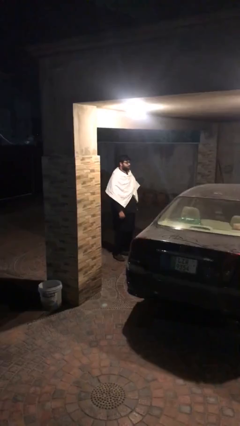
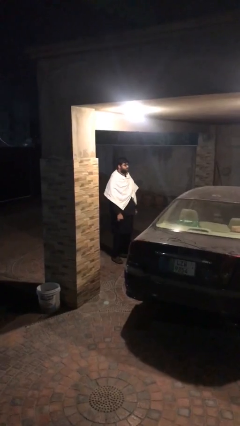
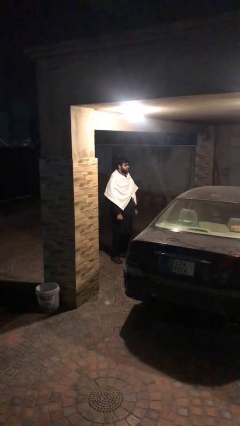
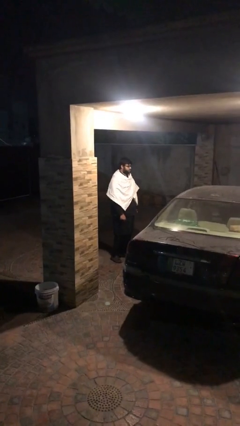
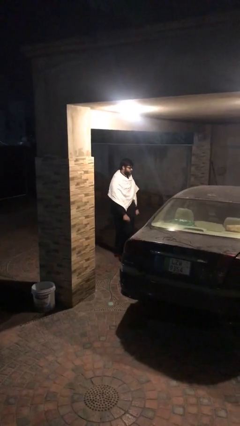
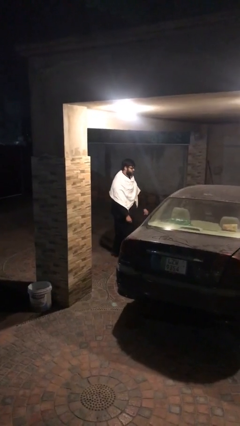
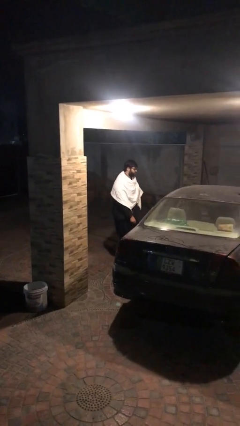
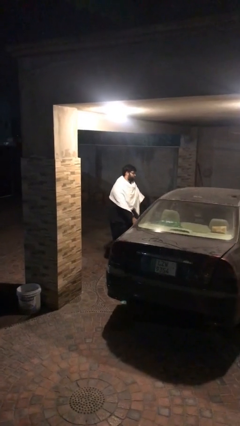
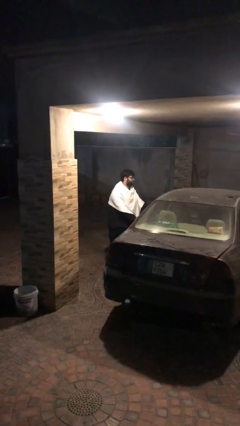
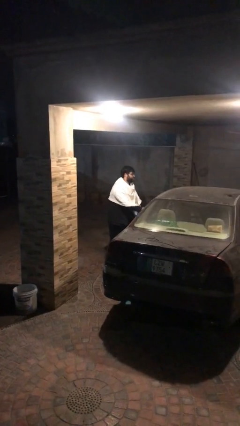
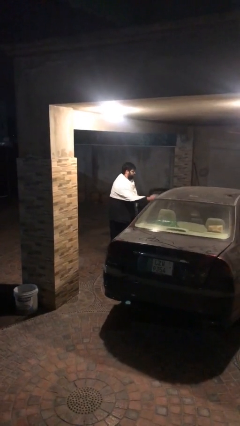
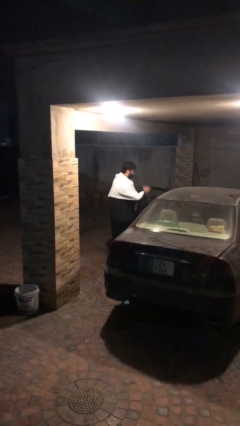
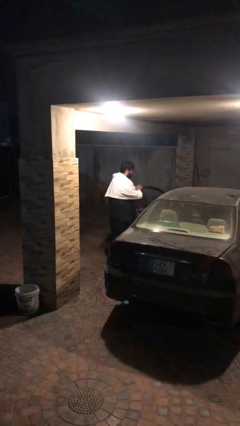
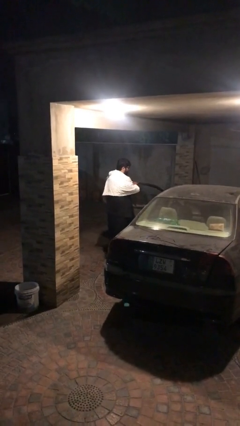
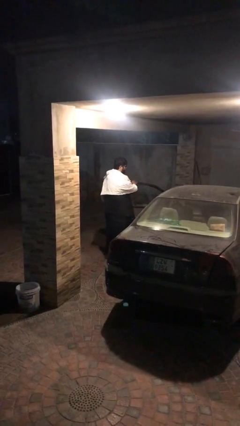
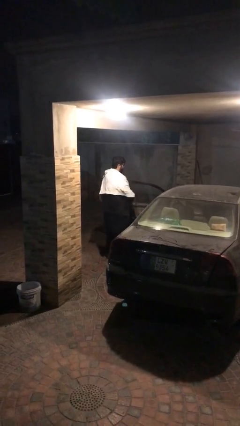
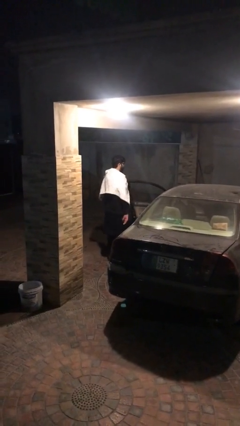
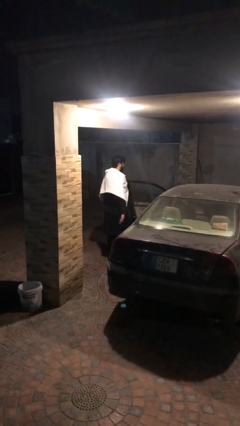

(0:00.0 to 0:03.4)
person opens car door

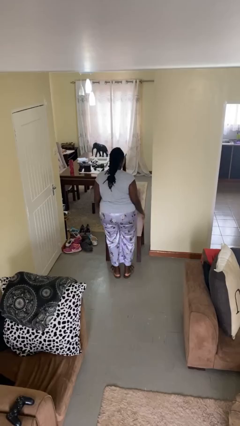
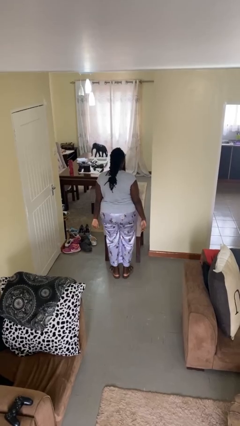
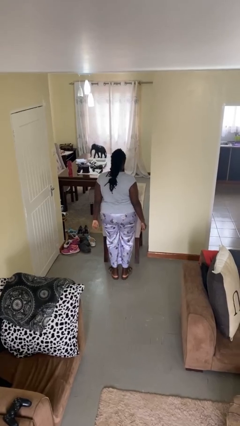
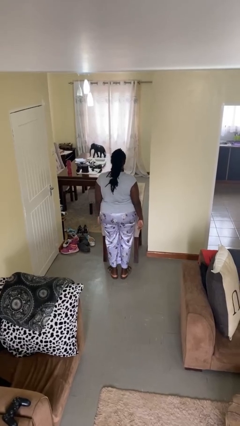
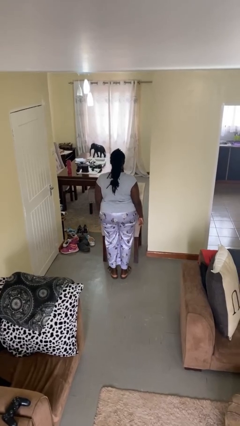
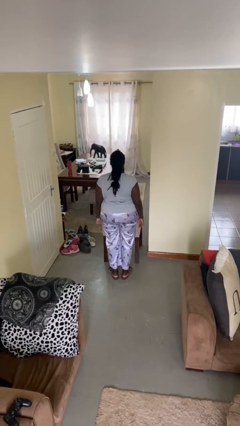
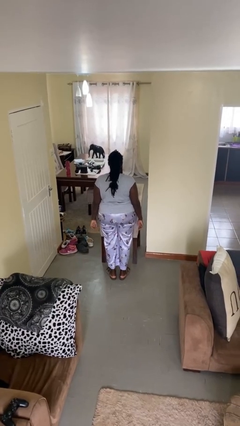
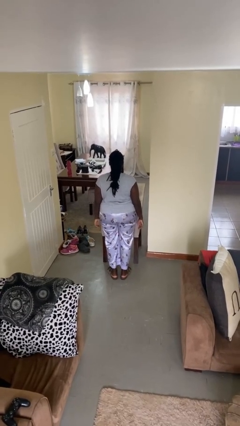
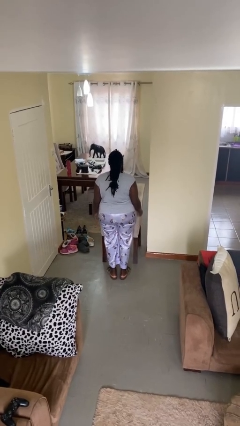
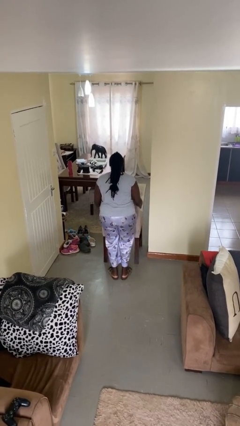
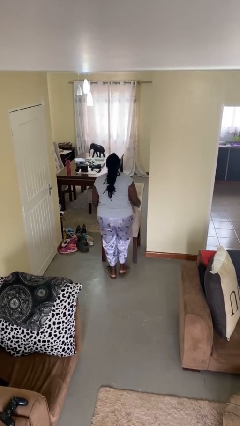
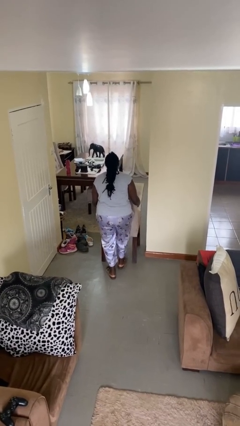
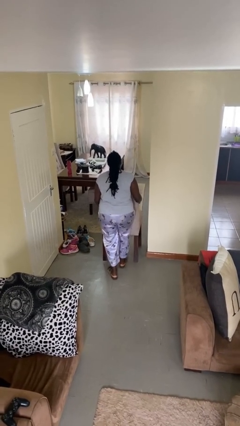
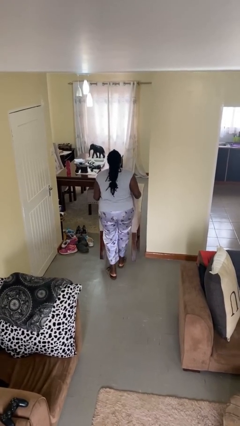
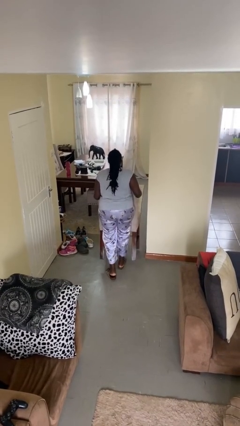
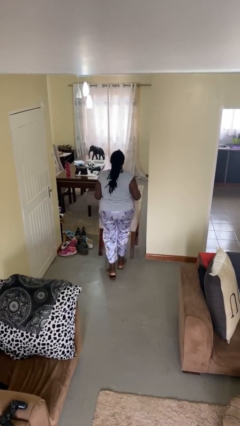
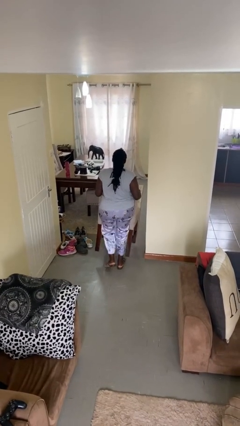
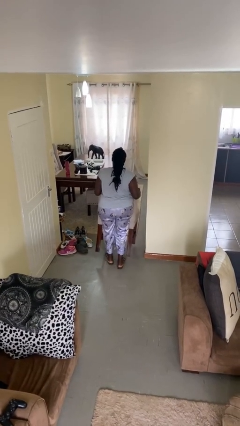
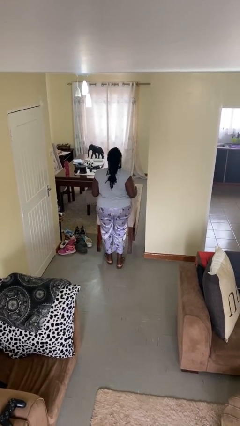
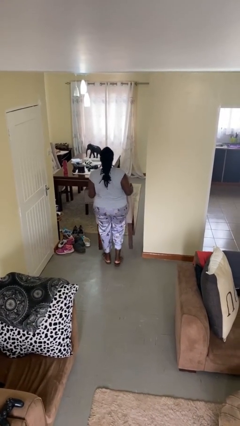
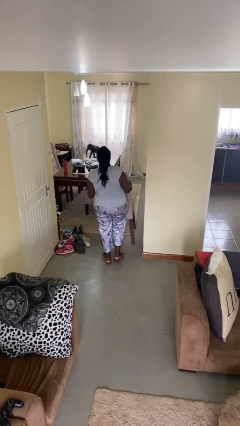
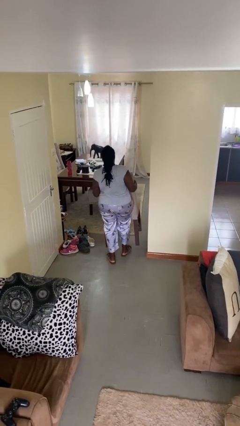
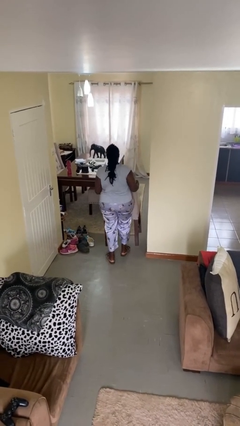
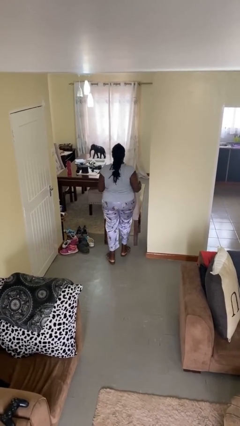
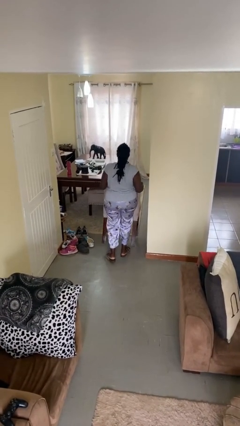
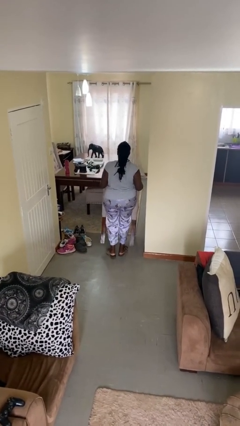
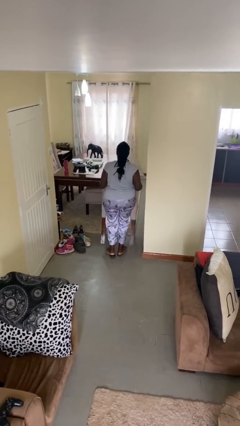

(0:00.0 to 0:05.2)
person carries furniture

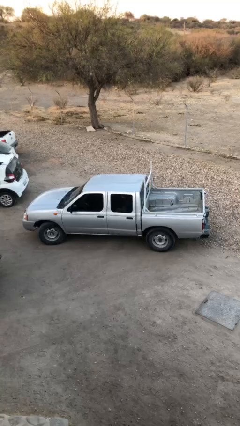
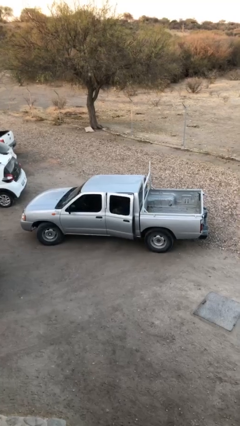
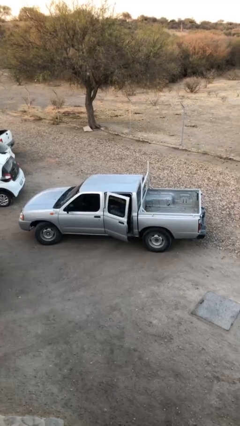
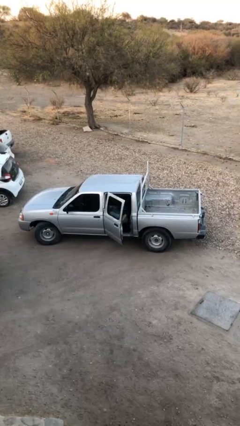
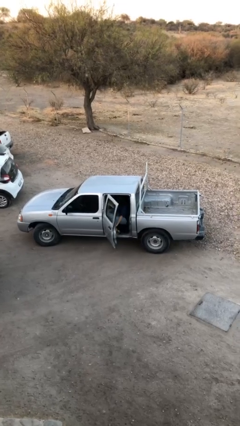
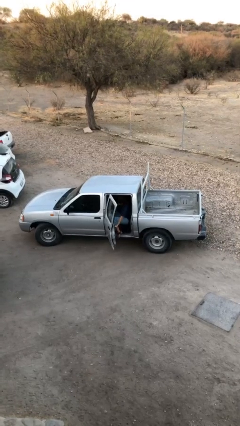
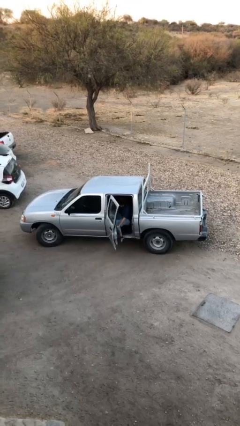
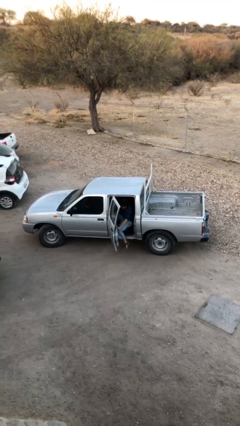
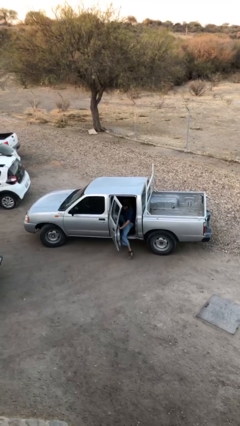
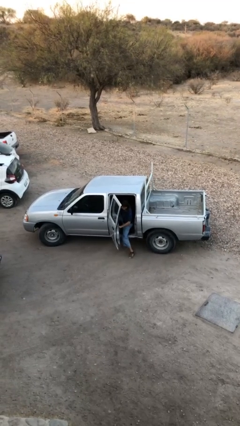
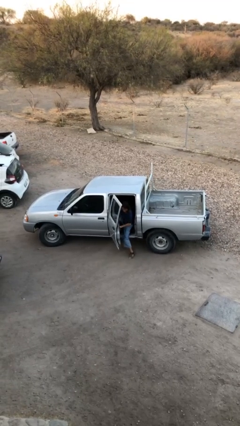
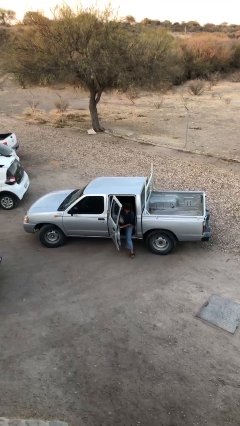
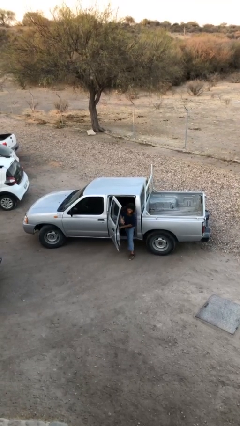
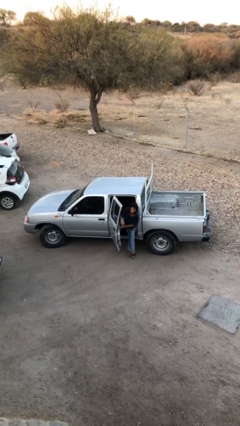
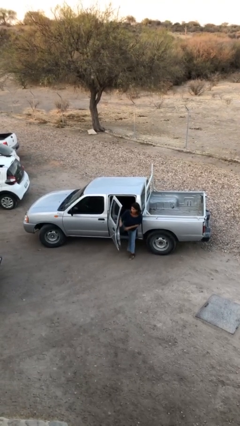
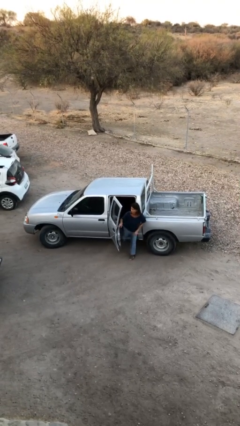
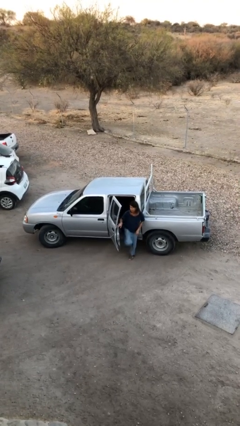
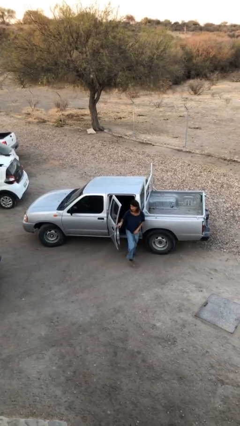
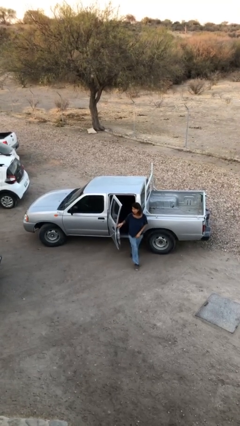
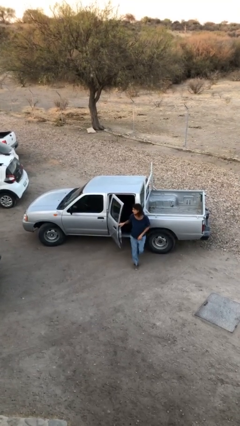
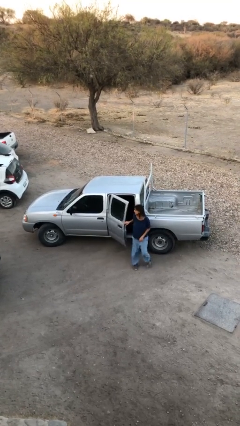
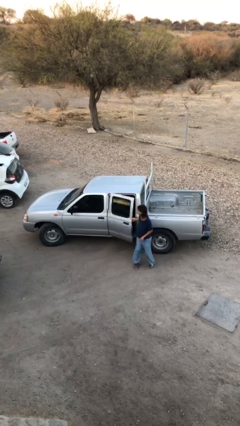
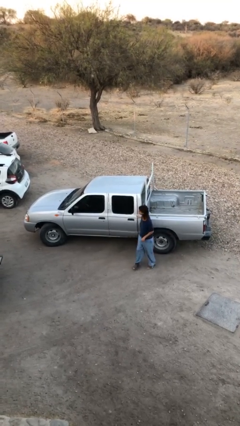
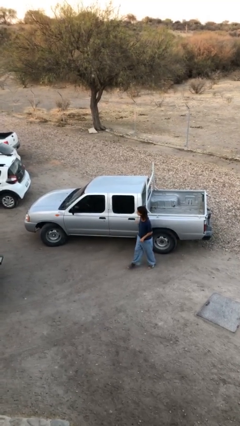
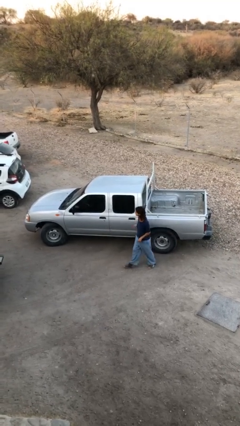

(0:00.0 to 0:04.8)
car drops off person

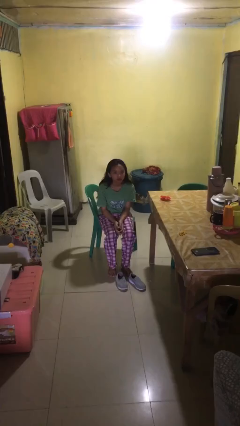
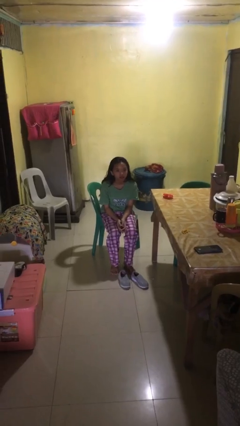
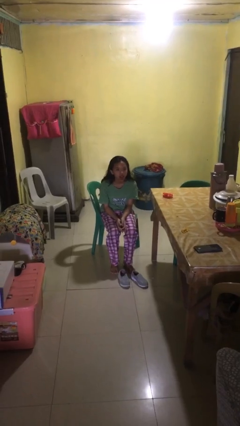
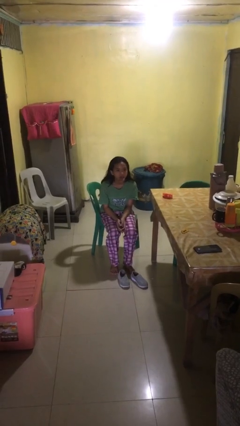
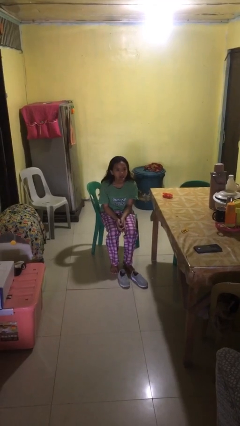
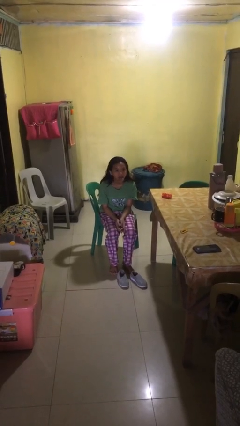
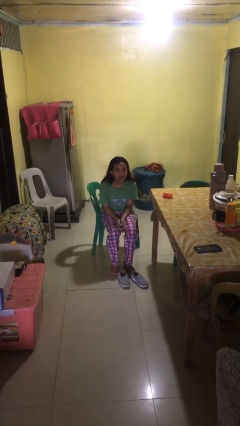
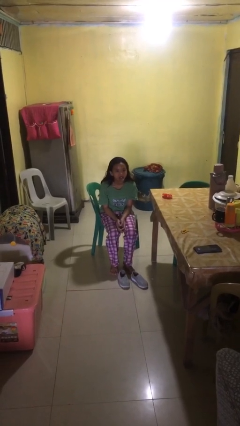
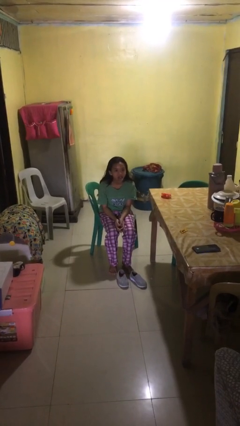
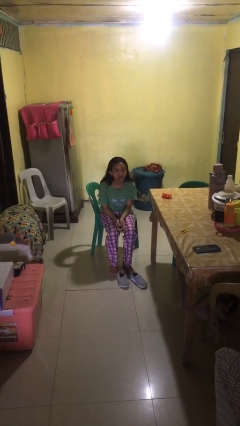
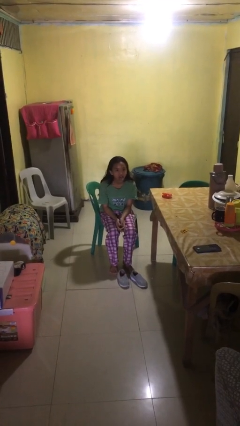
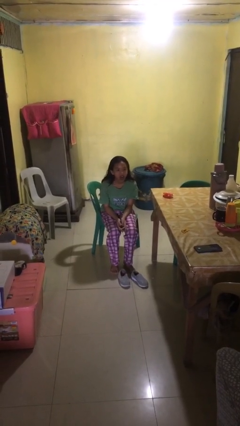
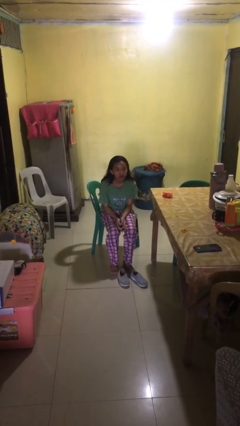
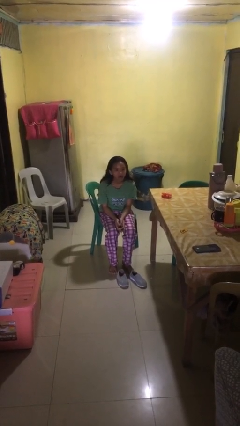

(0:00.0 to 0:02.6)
person sticks out tongue

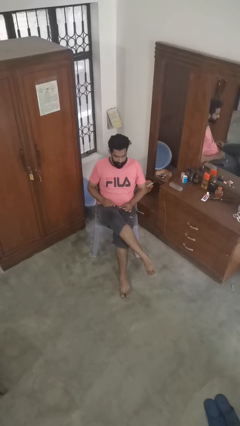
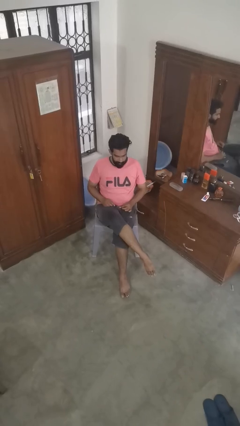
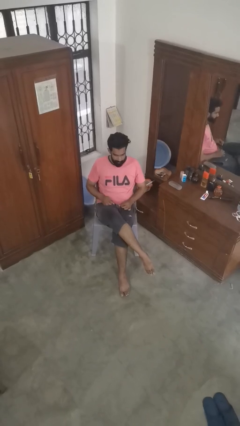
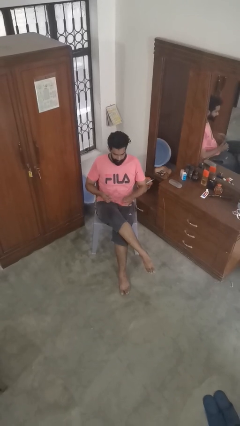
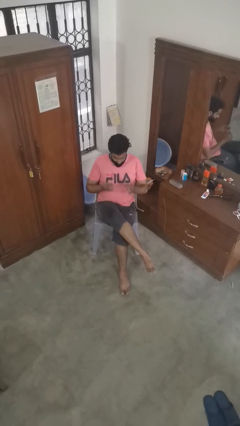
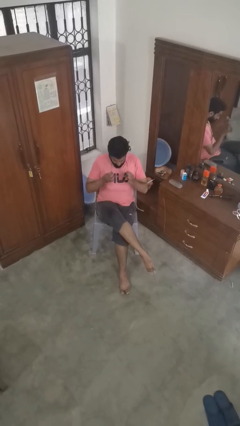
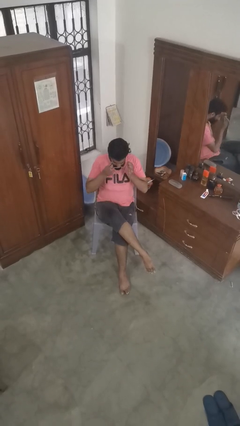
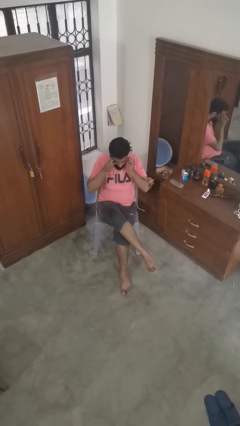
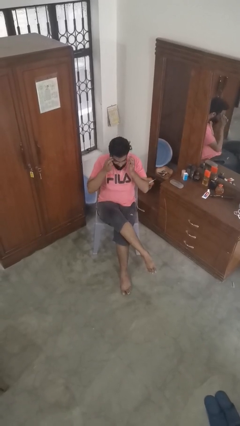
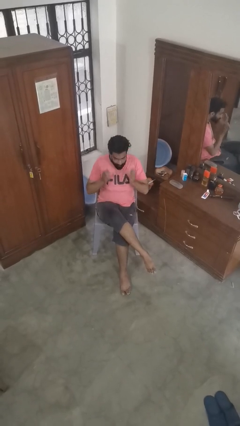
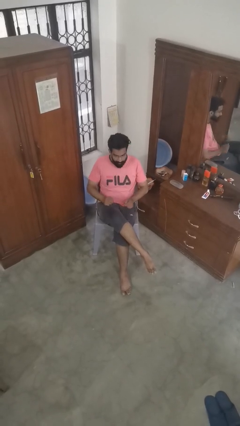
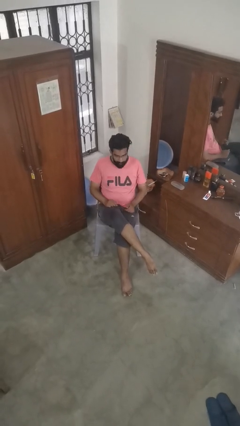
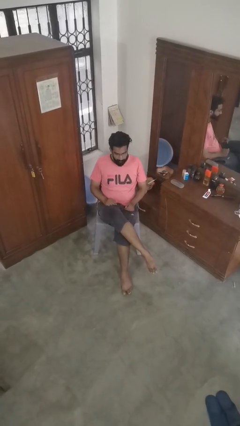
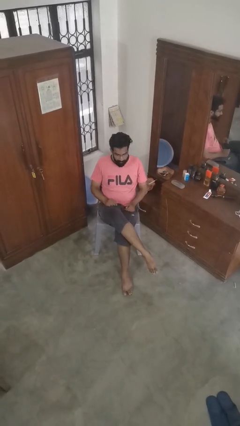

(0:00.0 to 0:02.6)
person puts on glasses
